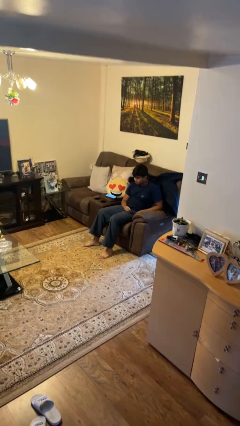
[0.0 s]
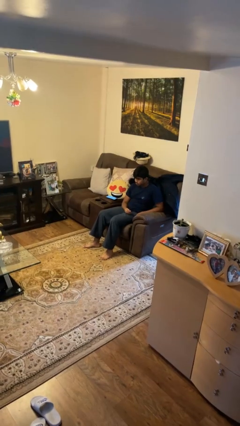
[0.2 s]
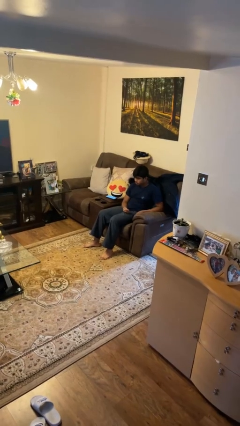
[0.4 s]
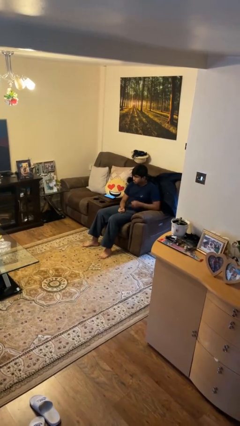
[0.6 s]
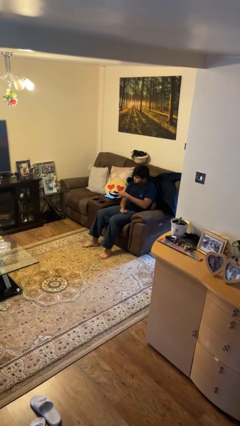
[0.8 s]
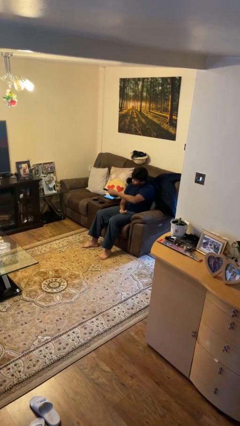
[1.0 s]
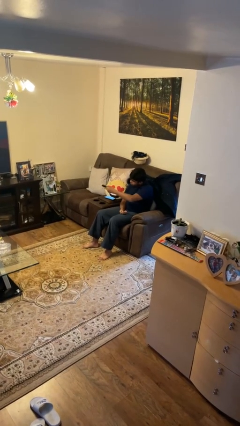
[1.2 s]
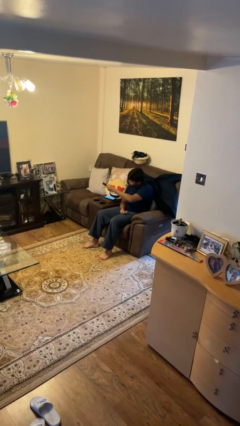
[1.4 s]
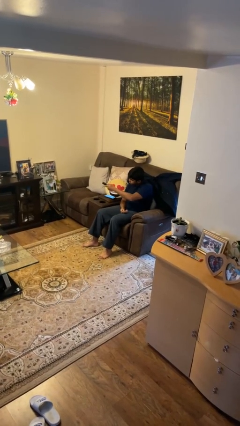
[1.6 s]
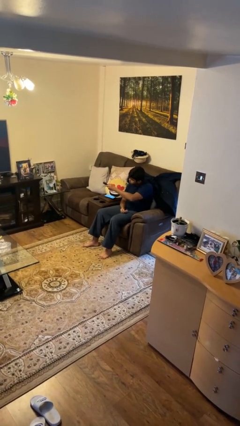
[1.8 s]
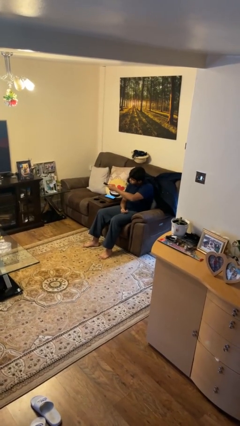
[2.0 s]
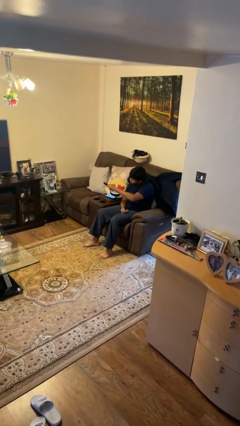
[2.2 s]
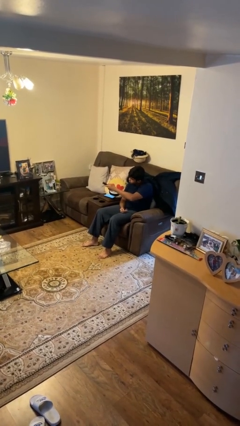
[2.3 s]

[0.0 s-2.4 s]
person uses television remote

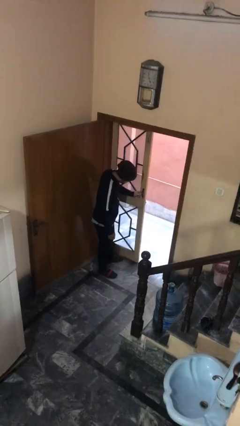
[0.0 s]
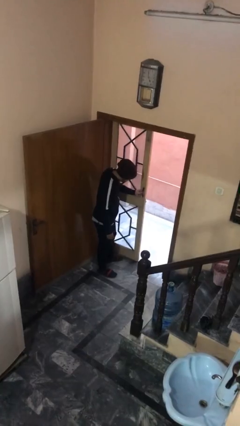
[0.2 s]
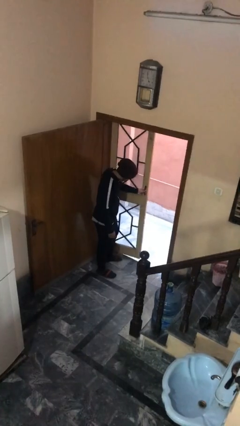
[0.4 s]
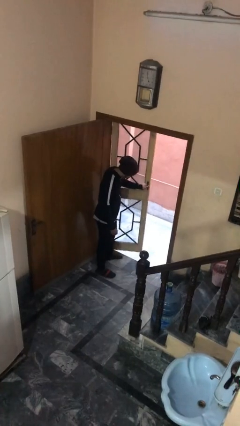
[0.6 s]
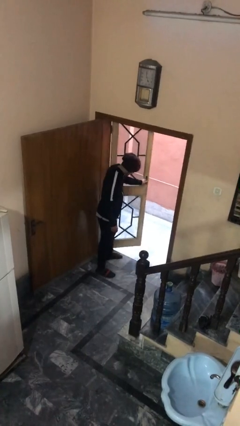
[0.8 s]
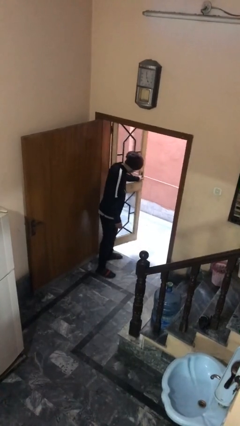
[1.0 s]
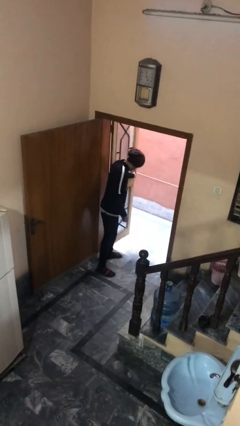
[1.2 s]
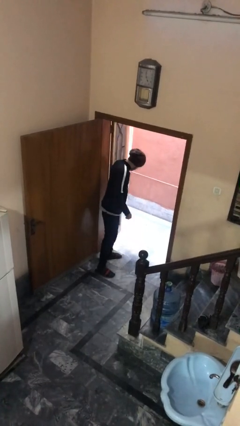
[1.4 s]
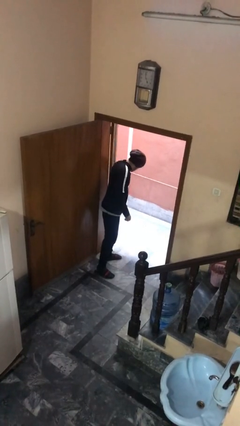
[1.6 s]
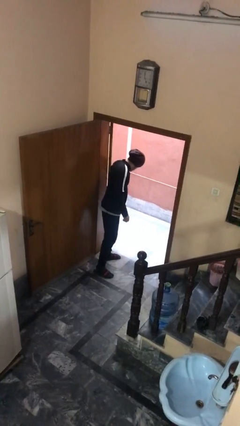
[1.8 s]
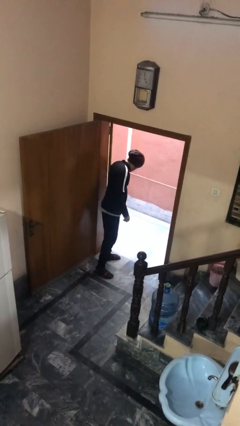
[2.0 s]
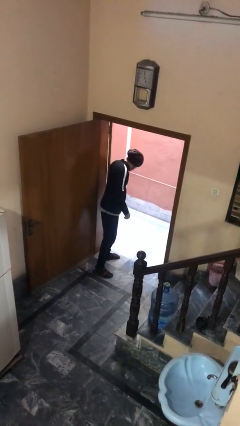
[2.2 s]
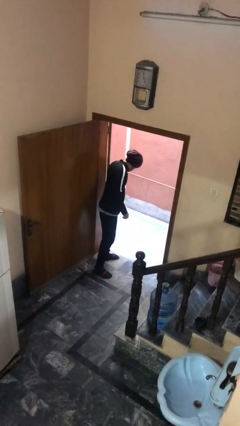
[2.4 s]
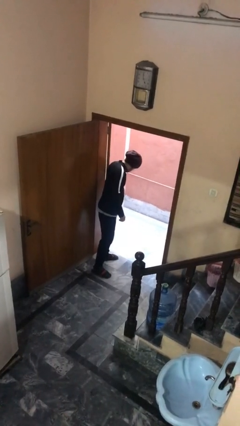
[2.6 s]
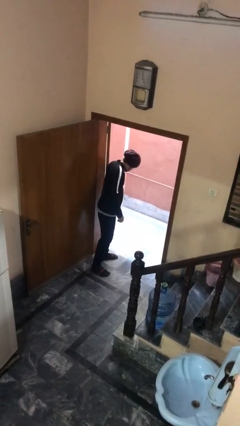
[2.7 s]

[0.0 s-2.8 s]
person opens facility door

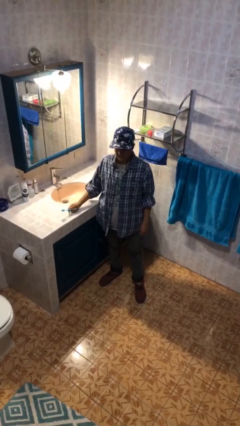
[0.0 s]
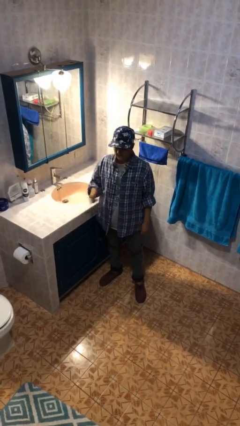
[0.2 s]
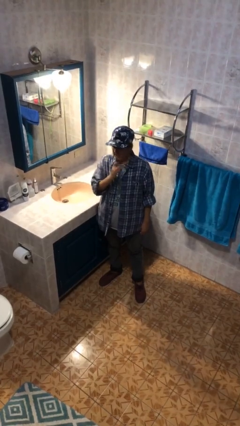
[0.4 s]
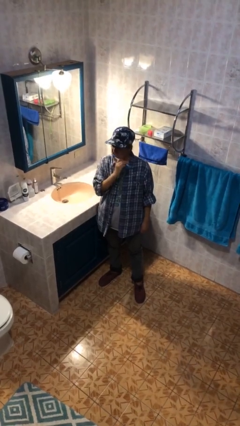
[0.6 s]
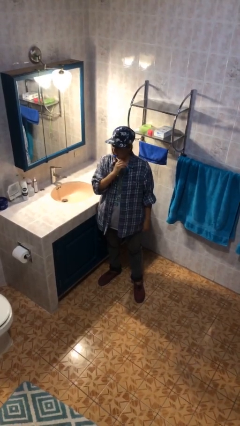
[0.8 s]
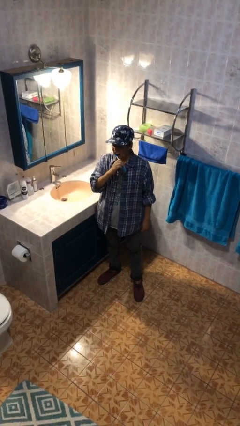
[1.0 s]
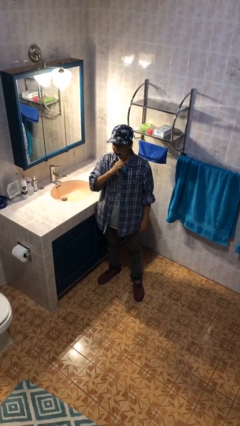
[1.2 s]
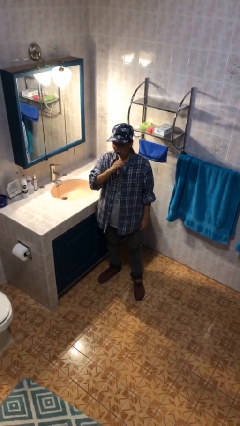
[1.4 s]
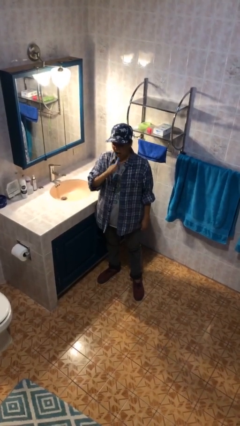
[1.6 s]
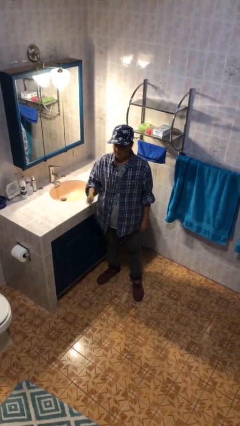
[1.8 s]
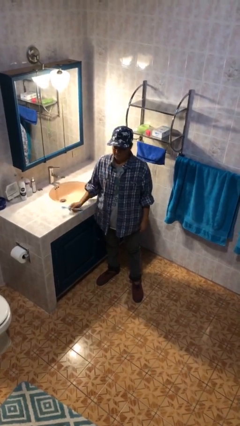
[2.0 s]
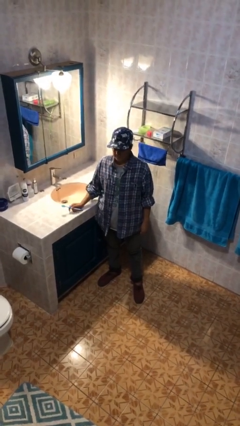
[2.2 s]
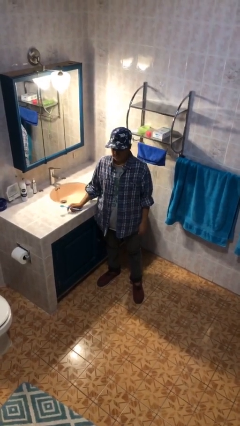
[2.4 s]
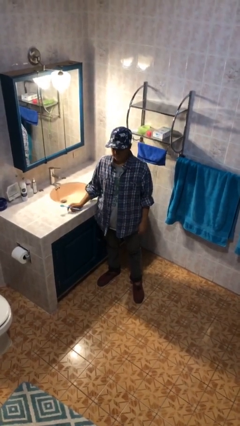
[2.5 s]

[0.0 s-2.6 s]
person brushes teeth

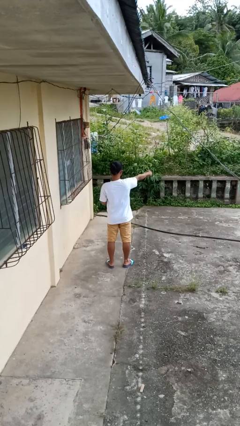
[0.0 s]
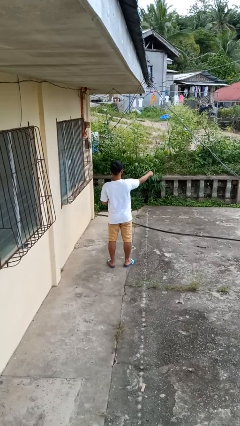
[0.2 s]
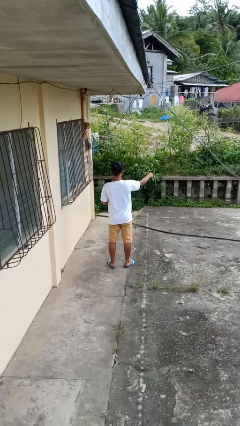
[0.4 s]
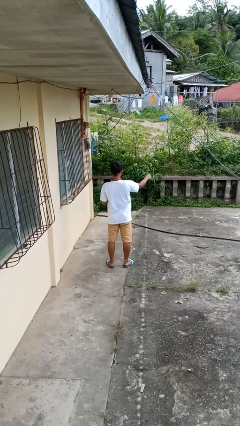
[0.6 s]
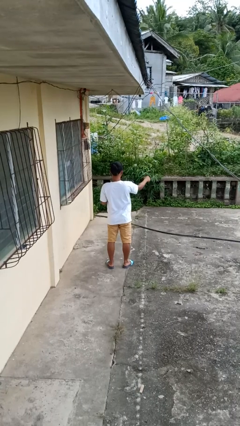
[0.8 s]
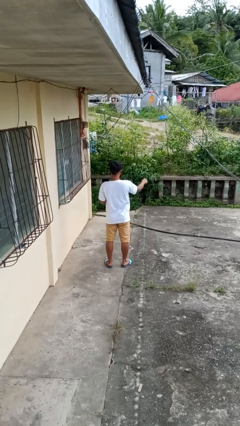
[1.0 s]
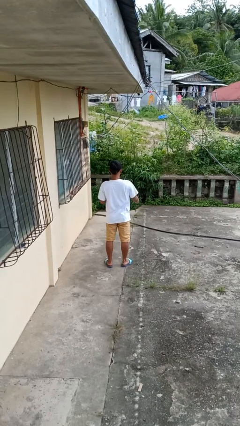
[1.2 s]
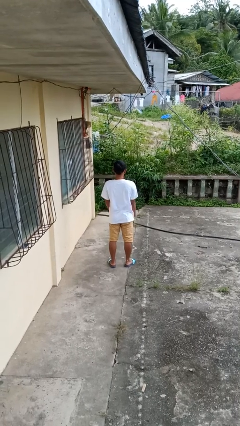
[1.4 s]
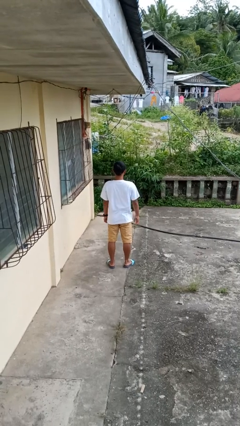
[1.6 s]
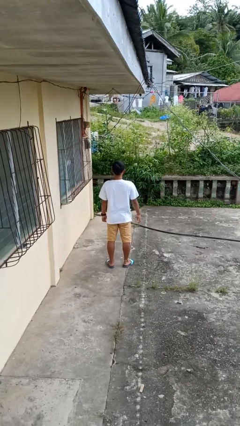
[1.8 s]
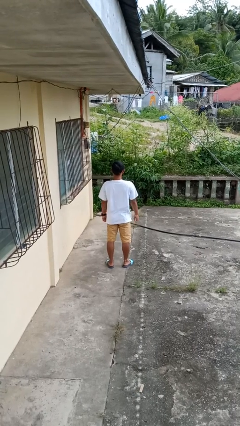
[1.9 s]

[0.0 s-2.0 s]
person punches

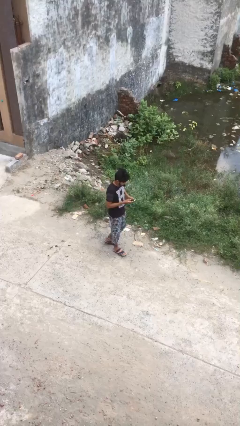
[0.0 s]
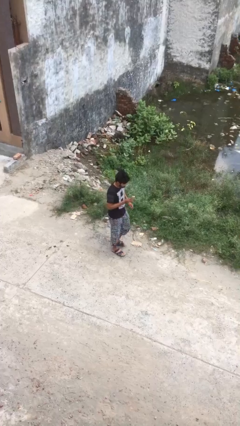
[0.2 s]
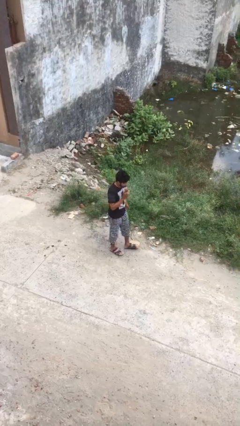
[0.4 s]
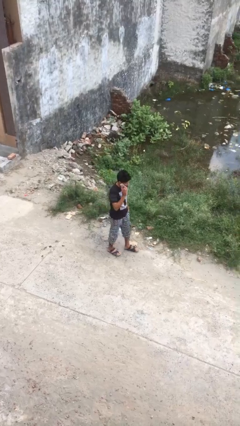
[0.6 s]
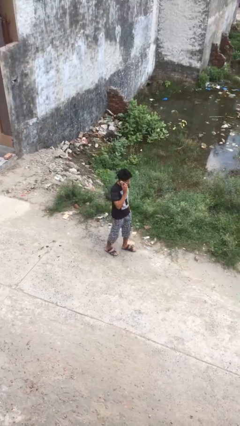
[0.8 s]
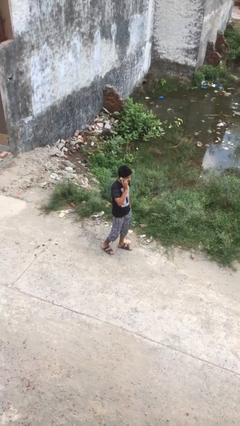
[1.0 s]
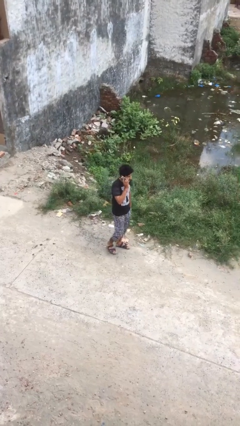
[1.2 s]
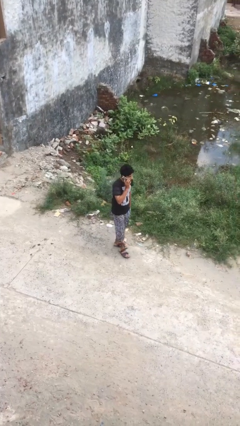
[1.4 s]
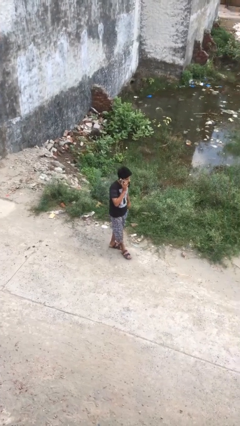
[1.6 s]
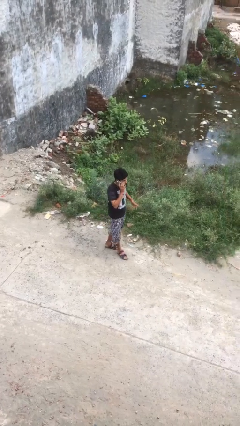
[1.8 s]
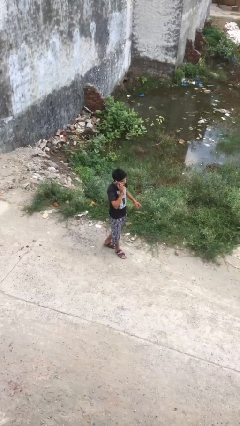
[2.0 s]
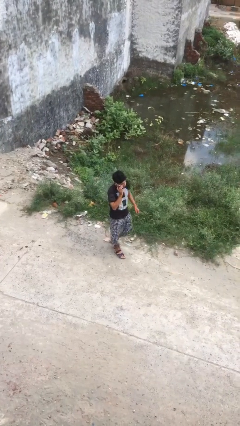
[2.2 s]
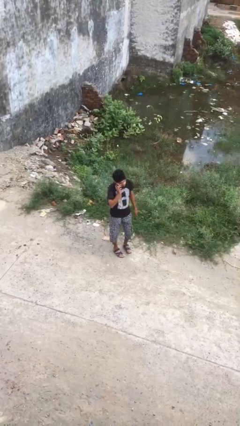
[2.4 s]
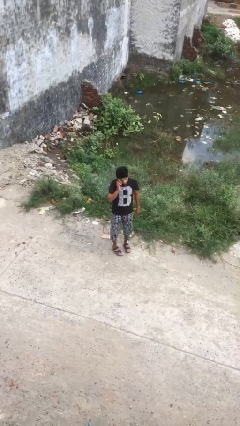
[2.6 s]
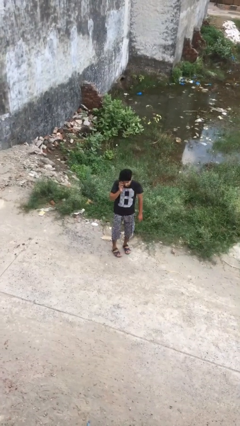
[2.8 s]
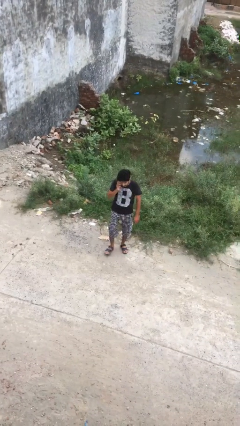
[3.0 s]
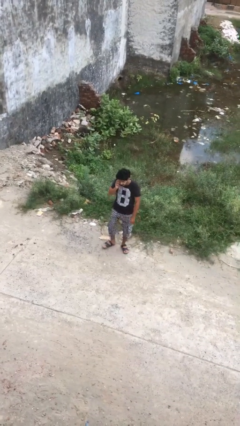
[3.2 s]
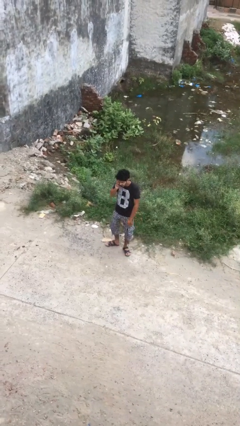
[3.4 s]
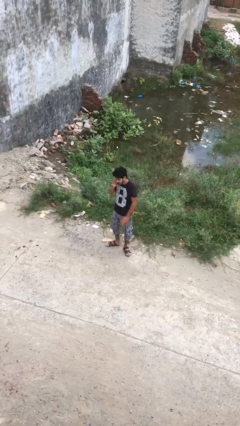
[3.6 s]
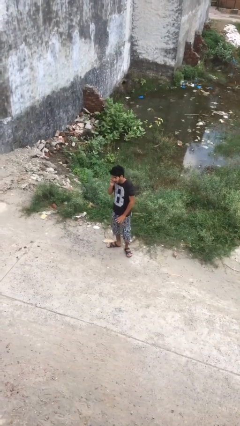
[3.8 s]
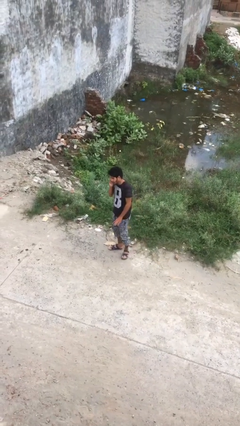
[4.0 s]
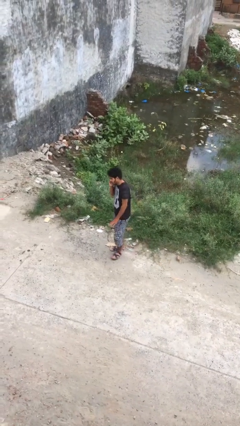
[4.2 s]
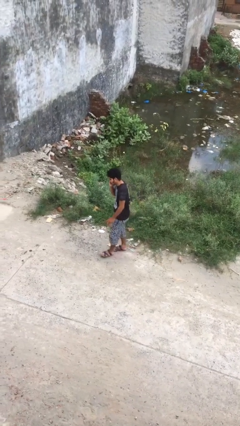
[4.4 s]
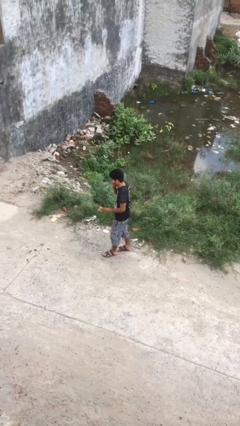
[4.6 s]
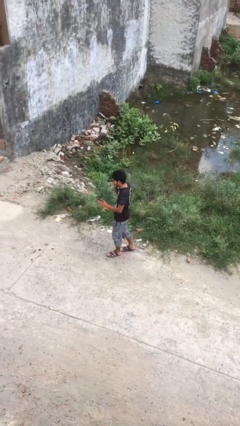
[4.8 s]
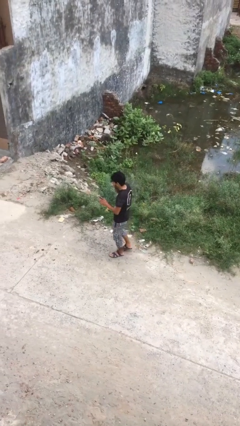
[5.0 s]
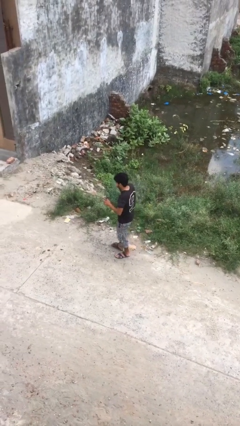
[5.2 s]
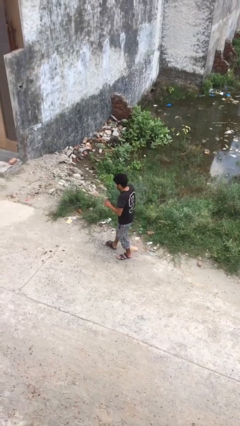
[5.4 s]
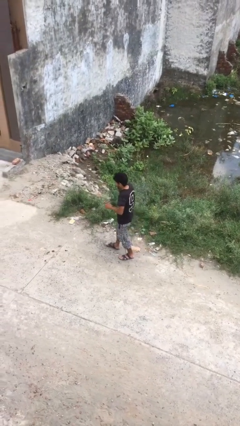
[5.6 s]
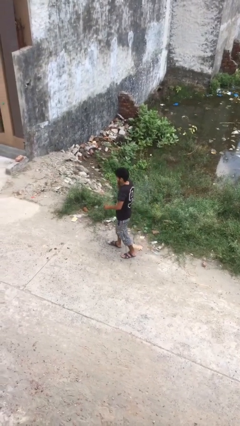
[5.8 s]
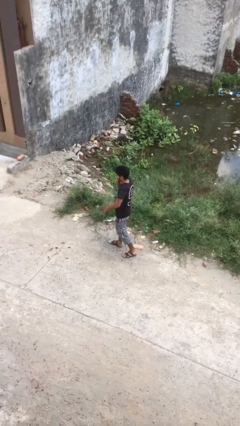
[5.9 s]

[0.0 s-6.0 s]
person talks on phone

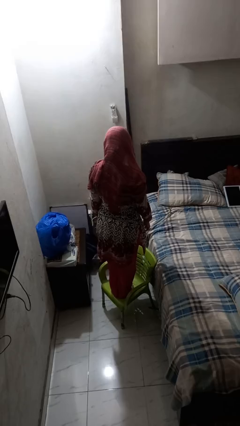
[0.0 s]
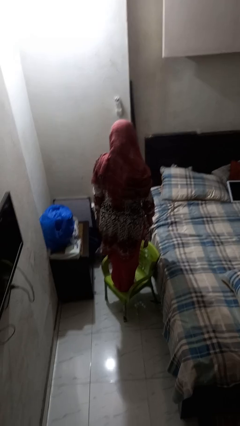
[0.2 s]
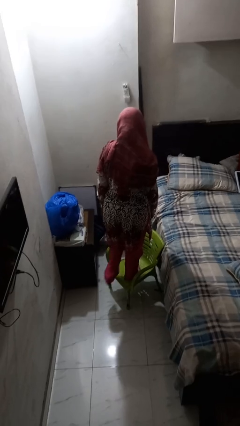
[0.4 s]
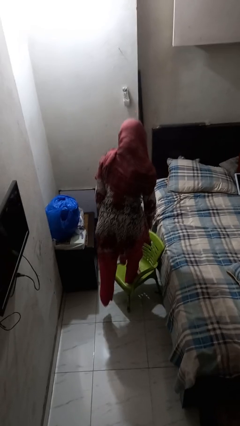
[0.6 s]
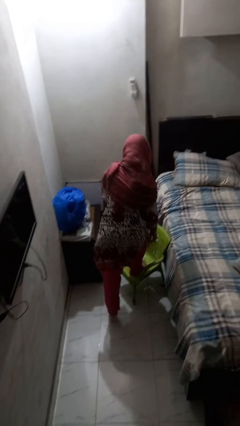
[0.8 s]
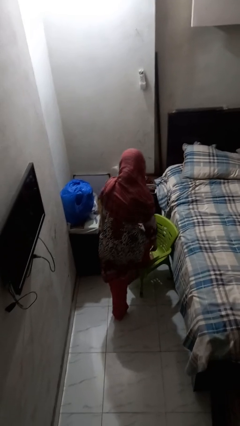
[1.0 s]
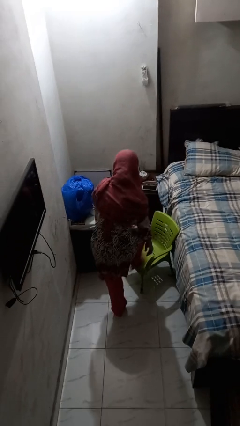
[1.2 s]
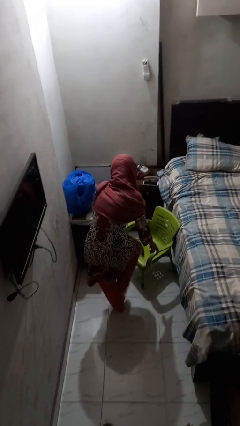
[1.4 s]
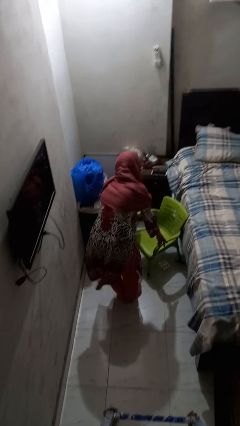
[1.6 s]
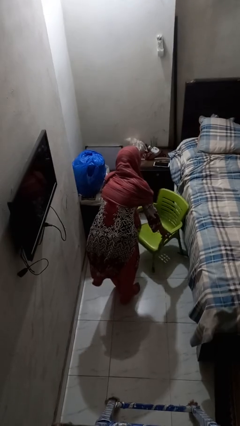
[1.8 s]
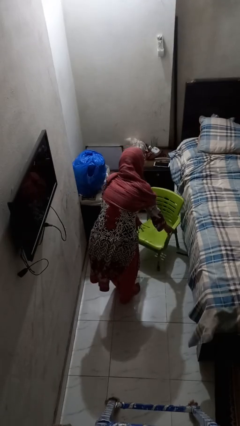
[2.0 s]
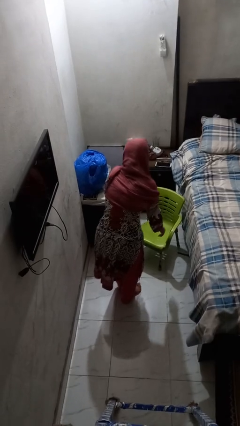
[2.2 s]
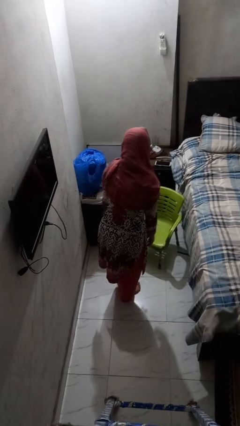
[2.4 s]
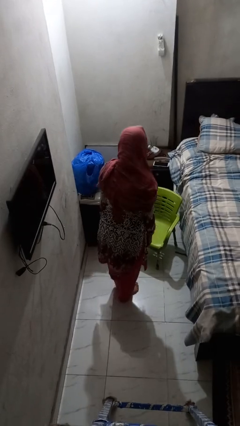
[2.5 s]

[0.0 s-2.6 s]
person climbs off chair
